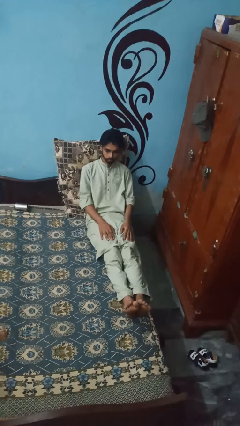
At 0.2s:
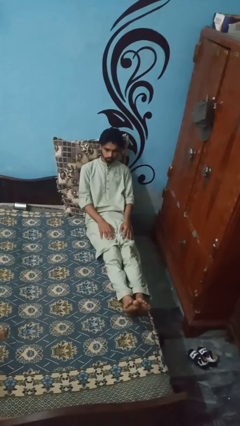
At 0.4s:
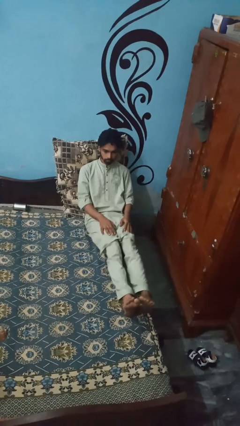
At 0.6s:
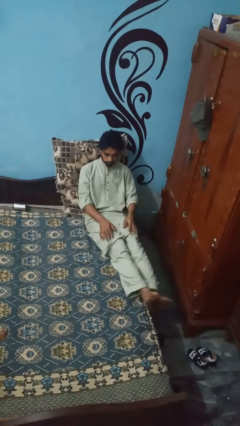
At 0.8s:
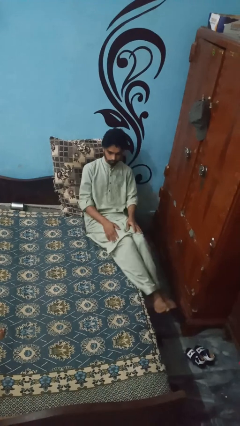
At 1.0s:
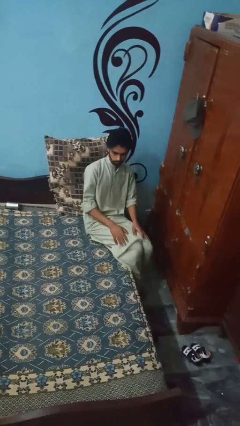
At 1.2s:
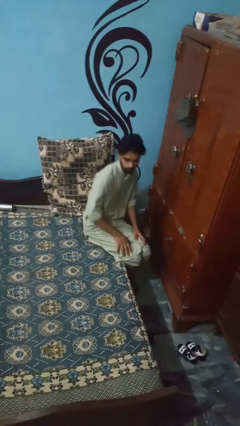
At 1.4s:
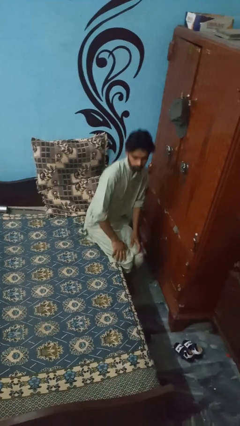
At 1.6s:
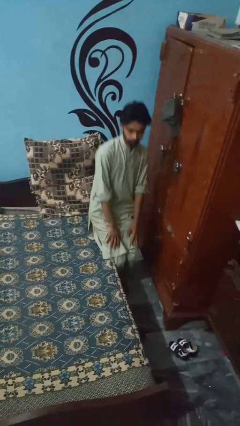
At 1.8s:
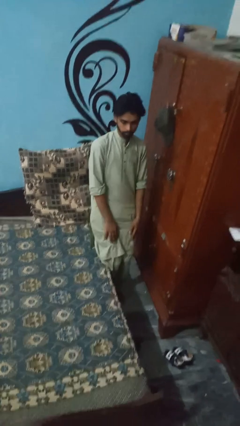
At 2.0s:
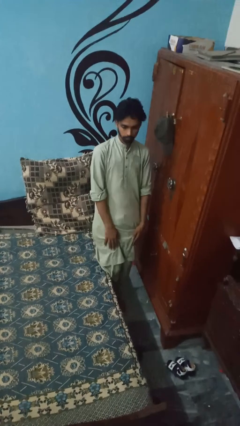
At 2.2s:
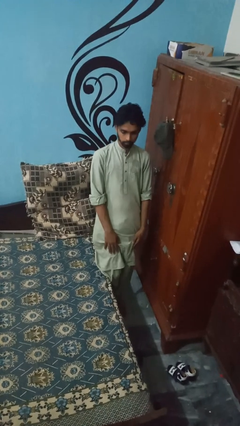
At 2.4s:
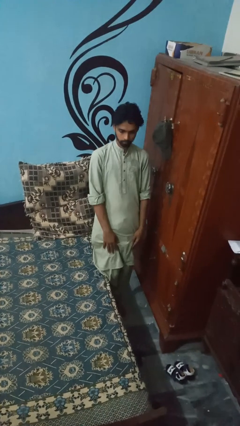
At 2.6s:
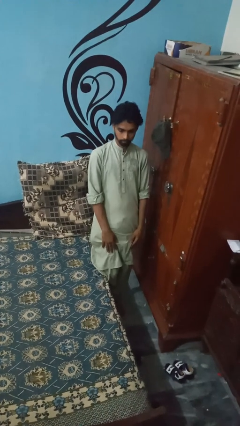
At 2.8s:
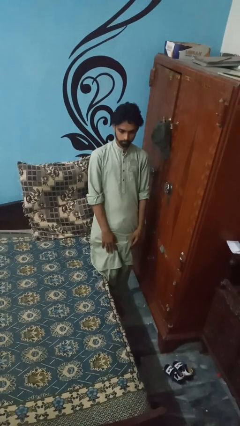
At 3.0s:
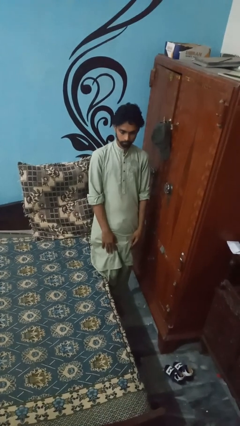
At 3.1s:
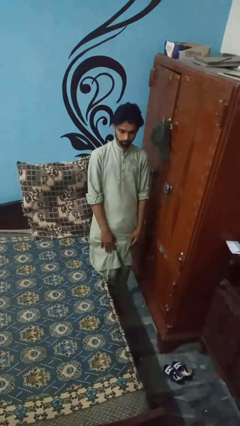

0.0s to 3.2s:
person stands up

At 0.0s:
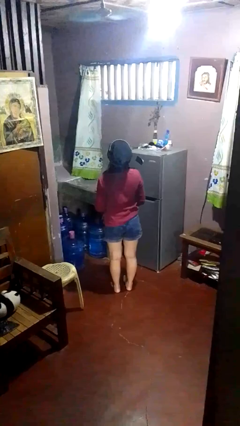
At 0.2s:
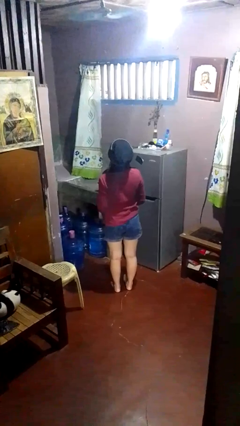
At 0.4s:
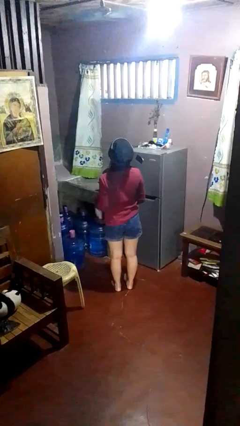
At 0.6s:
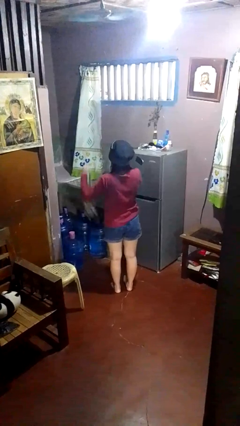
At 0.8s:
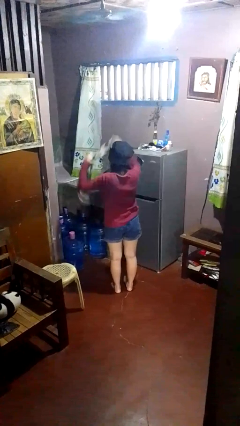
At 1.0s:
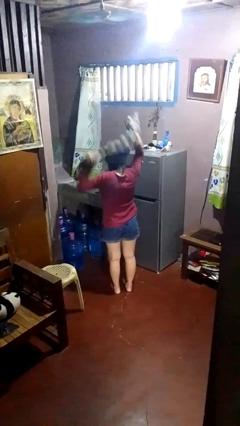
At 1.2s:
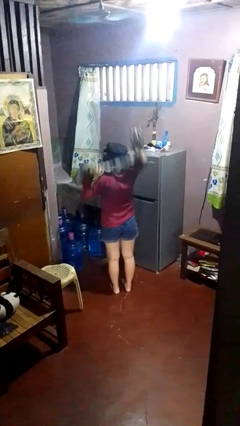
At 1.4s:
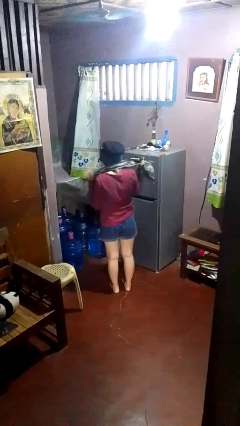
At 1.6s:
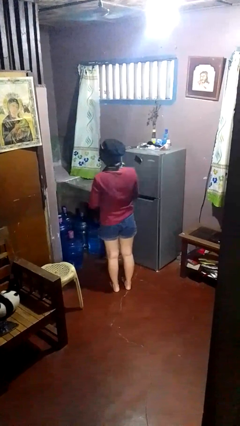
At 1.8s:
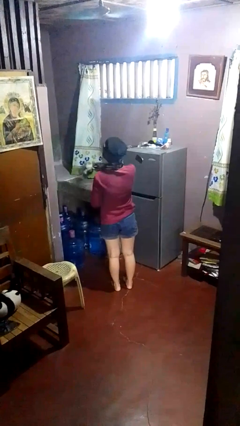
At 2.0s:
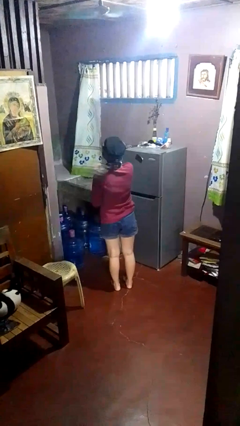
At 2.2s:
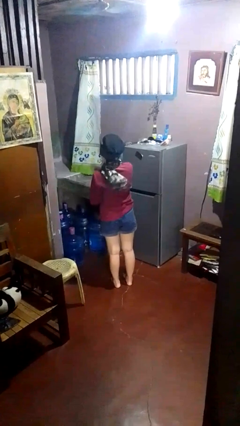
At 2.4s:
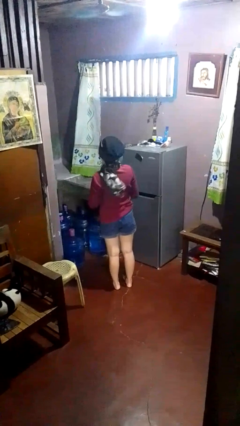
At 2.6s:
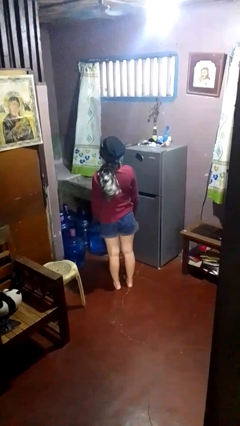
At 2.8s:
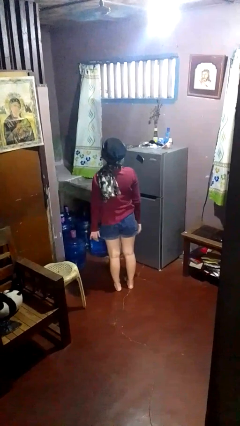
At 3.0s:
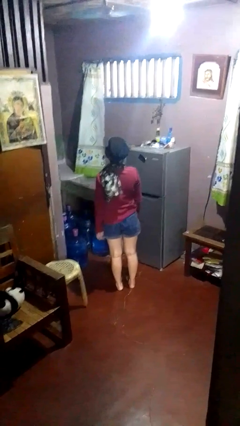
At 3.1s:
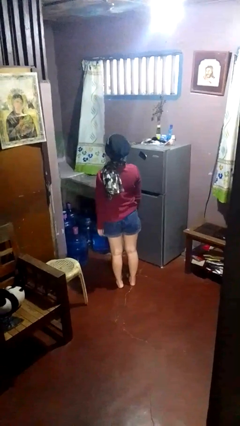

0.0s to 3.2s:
person puts on scarf

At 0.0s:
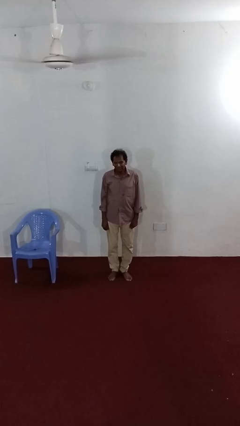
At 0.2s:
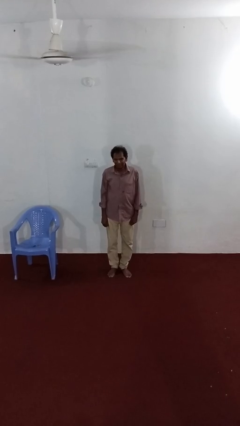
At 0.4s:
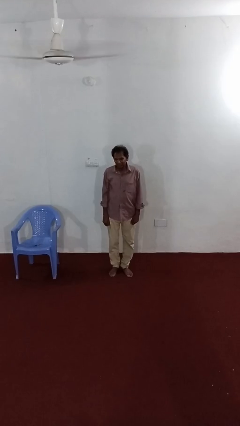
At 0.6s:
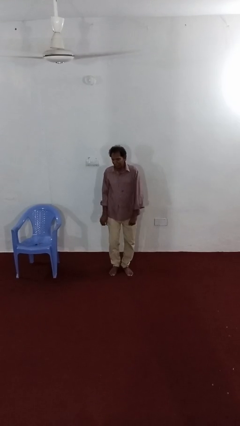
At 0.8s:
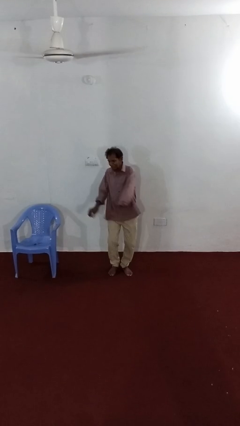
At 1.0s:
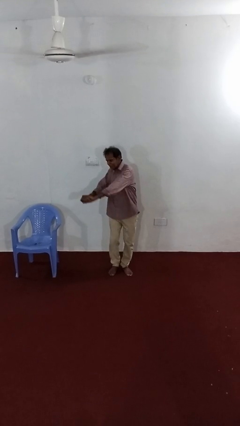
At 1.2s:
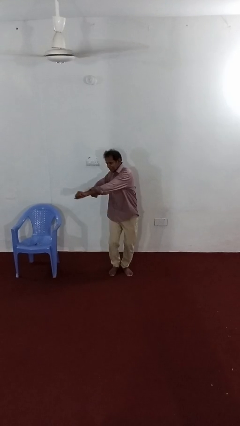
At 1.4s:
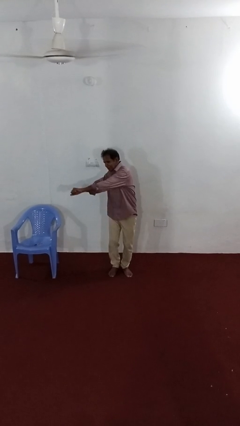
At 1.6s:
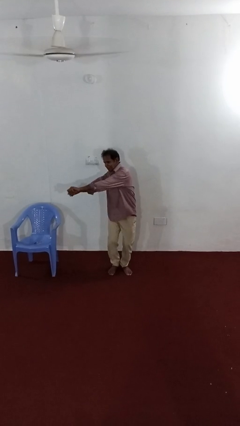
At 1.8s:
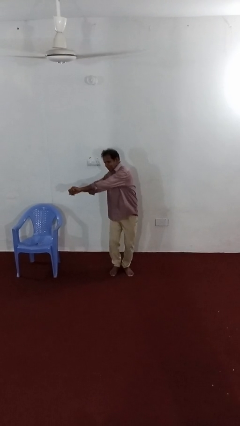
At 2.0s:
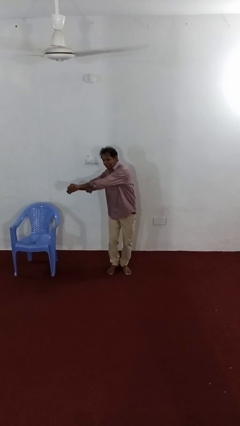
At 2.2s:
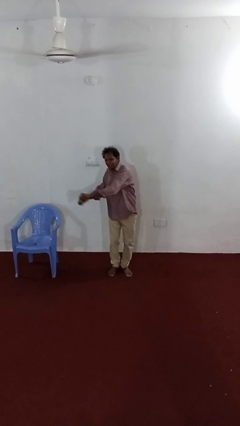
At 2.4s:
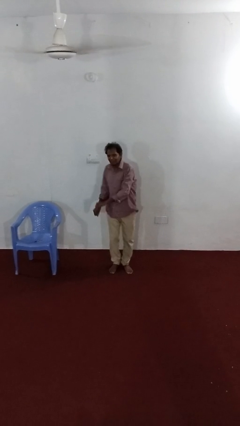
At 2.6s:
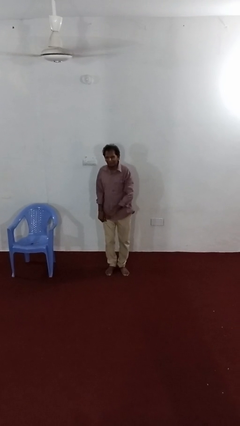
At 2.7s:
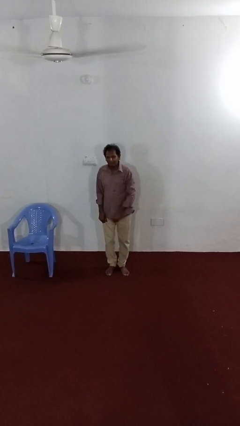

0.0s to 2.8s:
person dances in place

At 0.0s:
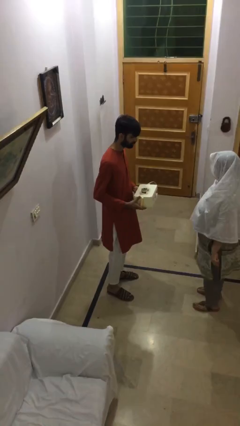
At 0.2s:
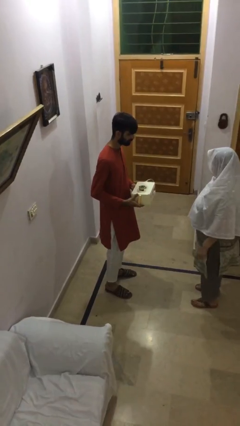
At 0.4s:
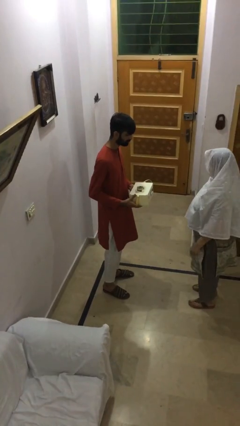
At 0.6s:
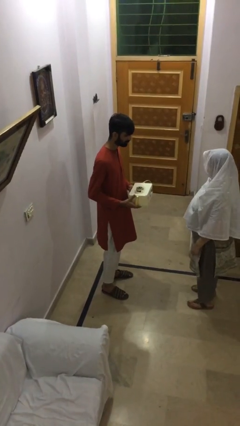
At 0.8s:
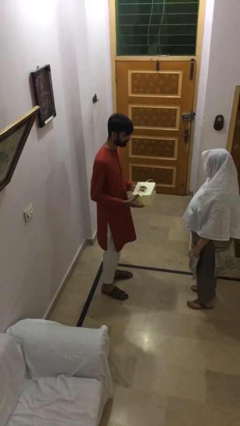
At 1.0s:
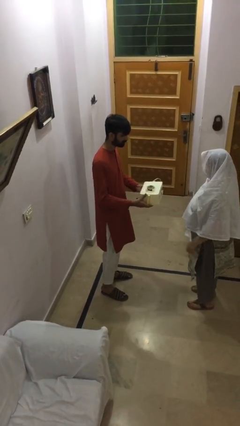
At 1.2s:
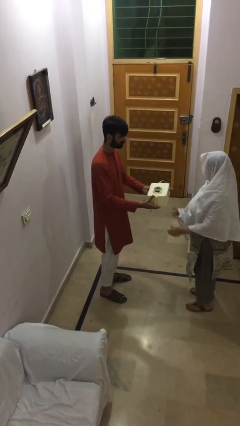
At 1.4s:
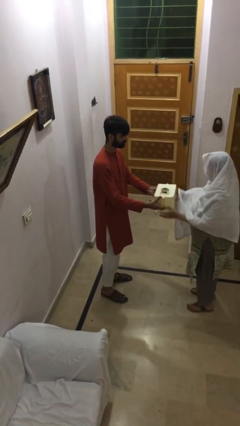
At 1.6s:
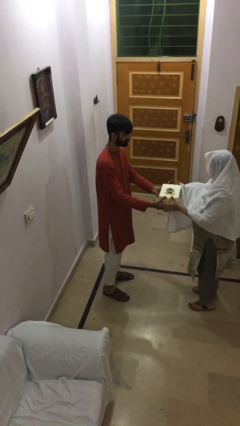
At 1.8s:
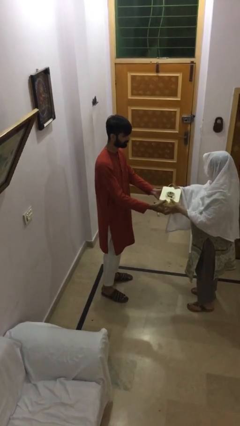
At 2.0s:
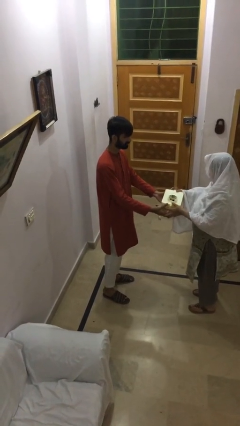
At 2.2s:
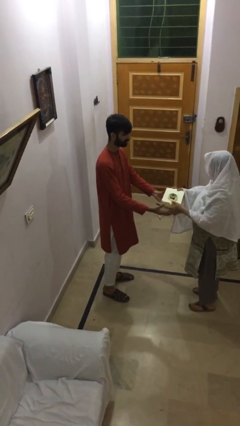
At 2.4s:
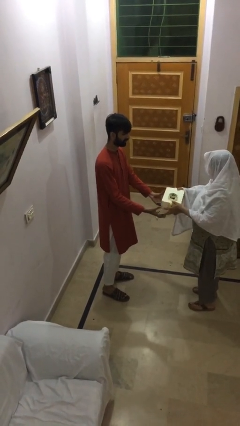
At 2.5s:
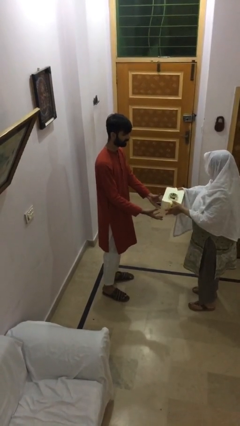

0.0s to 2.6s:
person transfers object to person

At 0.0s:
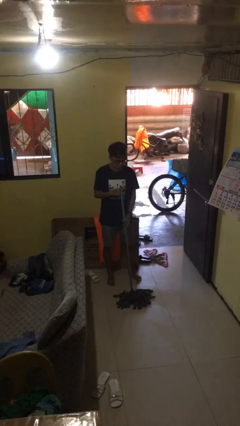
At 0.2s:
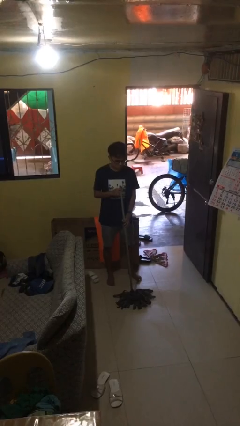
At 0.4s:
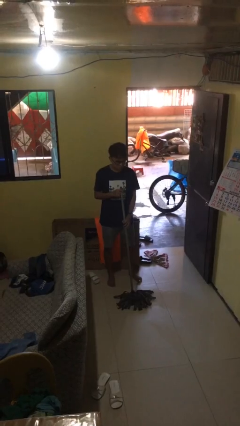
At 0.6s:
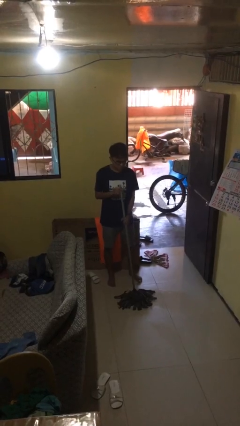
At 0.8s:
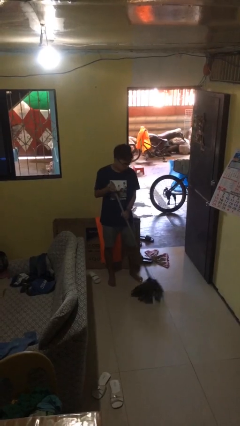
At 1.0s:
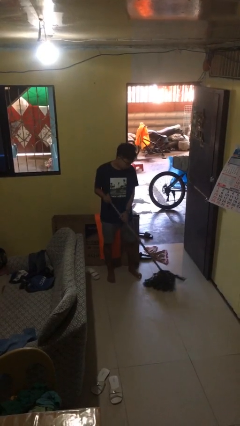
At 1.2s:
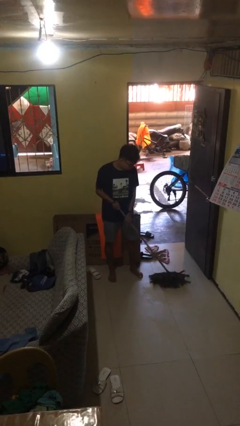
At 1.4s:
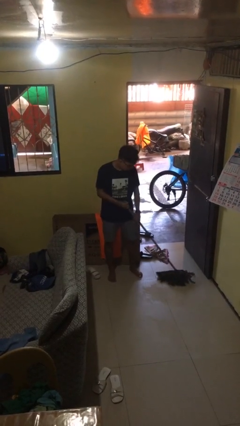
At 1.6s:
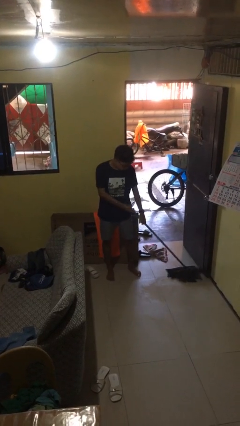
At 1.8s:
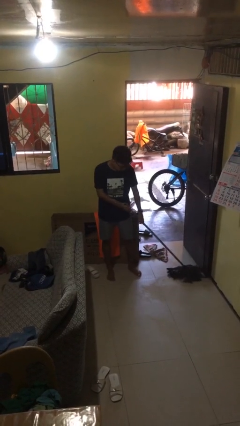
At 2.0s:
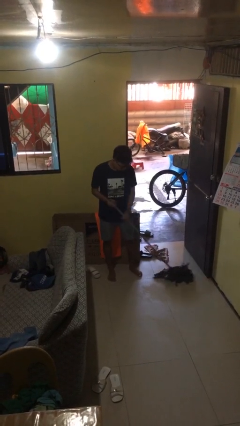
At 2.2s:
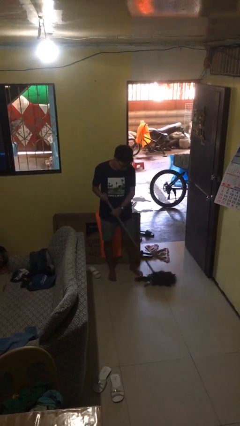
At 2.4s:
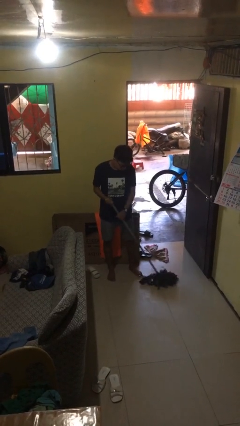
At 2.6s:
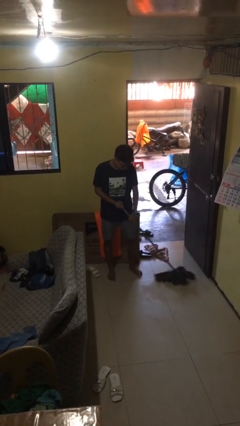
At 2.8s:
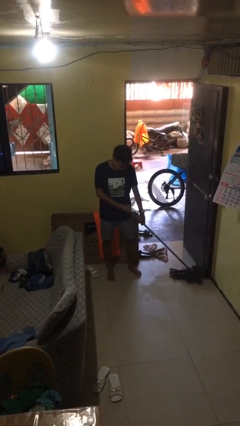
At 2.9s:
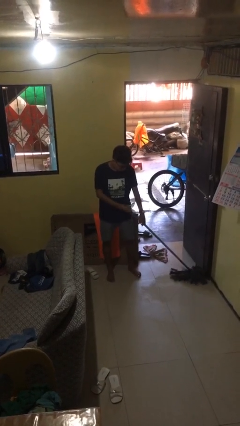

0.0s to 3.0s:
person mops

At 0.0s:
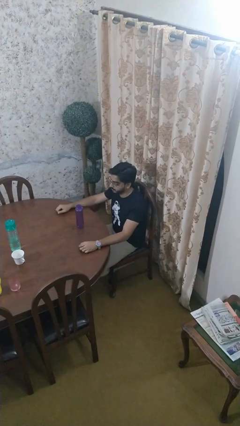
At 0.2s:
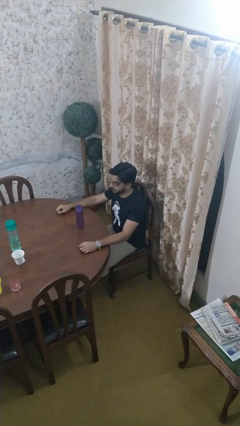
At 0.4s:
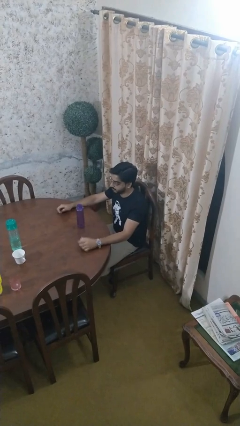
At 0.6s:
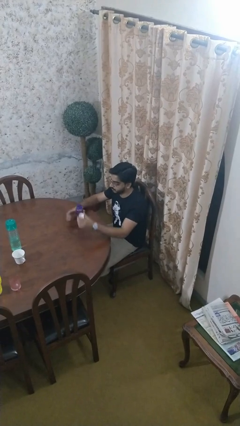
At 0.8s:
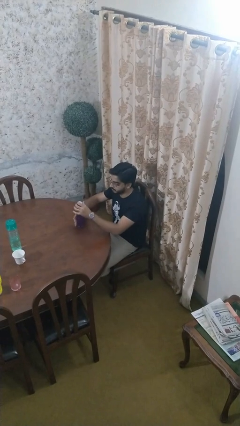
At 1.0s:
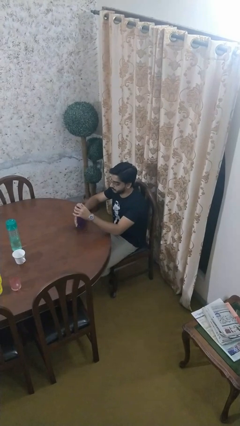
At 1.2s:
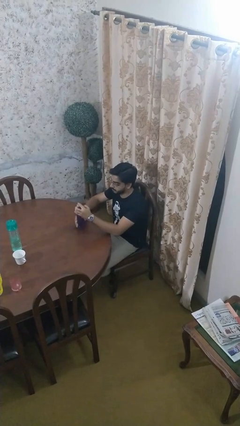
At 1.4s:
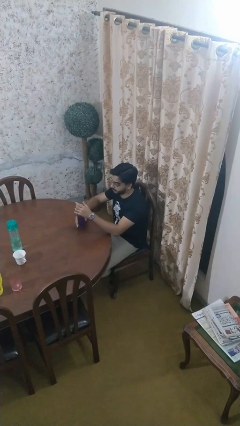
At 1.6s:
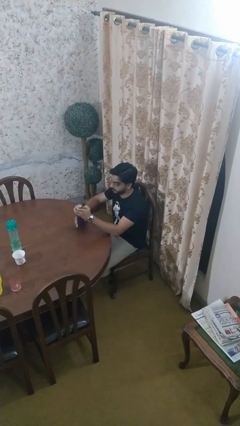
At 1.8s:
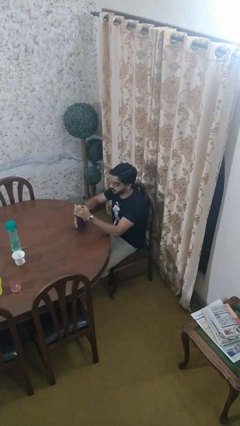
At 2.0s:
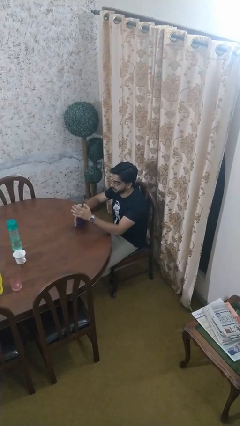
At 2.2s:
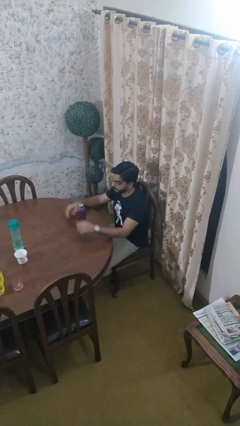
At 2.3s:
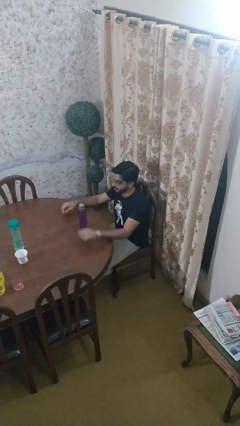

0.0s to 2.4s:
person screws lid to bottle

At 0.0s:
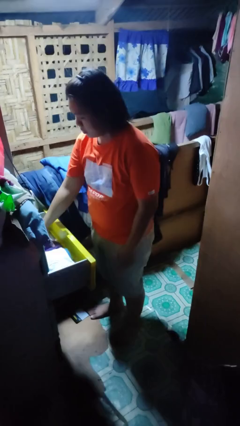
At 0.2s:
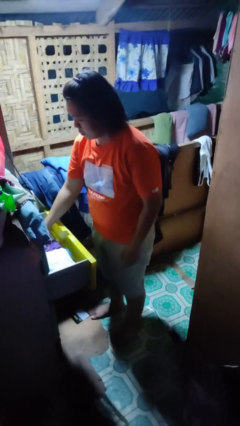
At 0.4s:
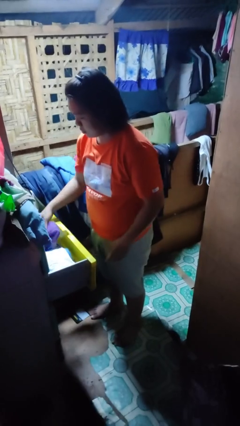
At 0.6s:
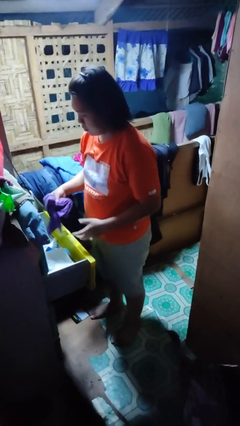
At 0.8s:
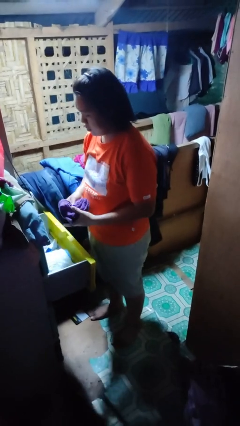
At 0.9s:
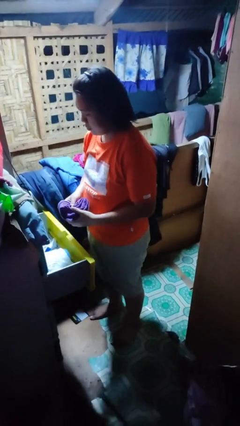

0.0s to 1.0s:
person takes clothes from dresser
